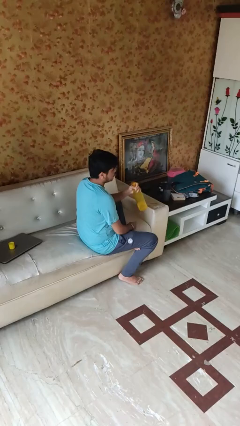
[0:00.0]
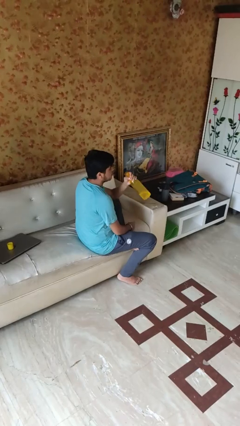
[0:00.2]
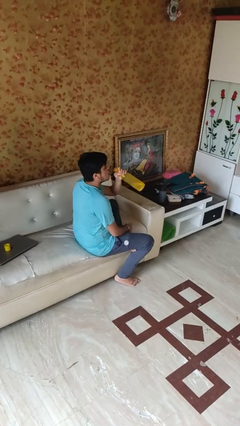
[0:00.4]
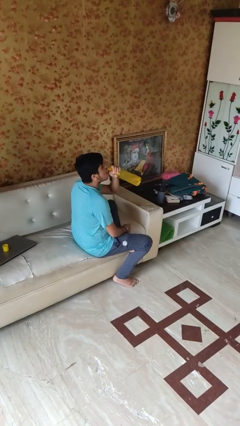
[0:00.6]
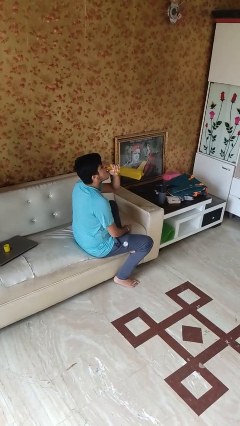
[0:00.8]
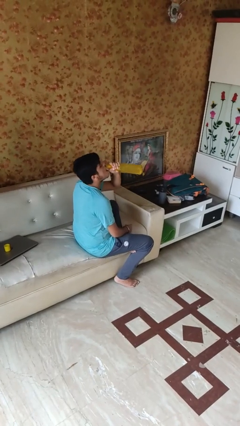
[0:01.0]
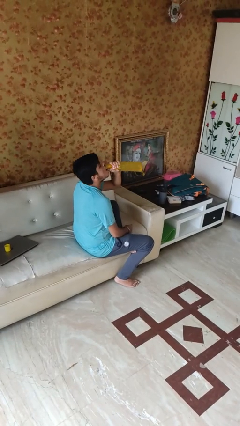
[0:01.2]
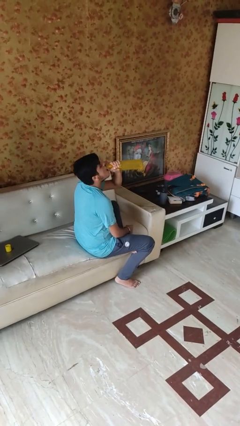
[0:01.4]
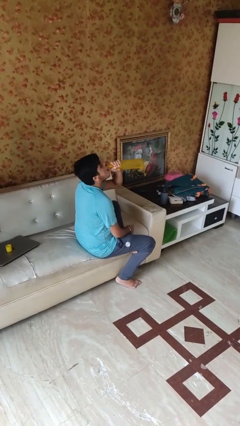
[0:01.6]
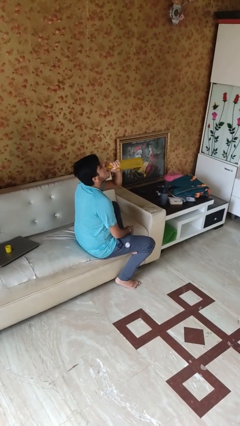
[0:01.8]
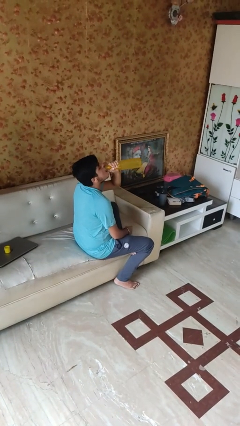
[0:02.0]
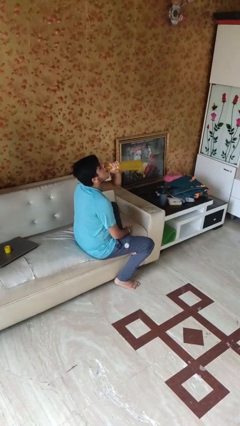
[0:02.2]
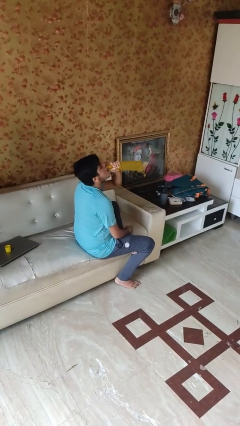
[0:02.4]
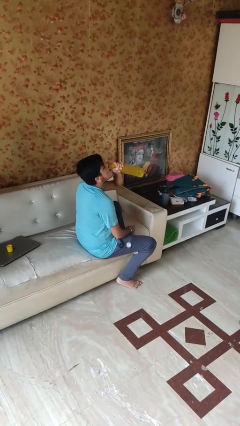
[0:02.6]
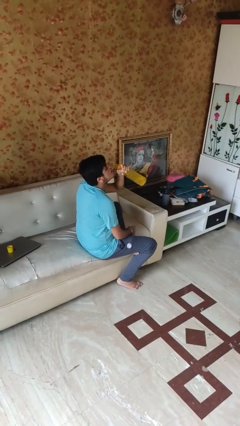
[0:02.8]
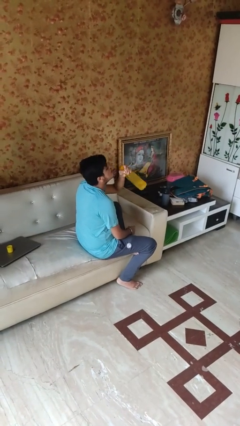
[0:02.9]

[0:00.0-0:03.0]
person drinks from bottle

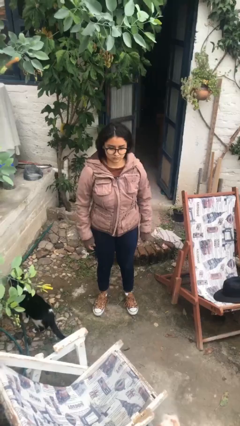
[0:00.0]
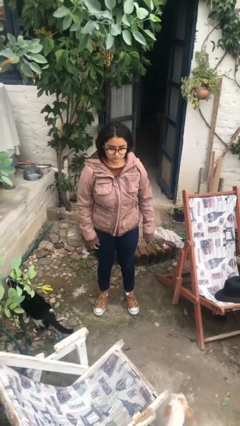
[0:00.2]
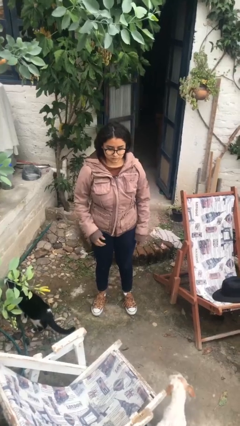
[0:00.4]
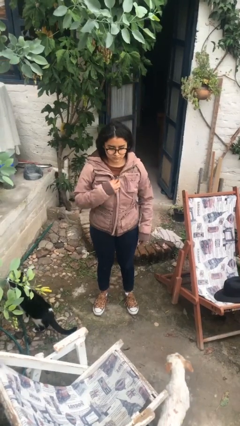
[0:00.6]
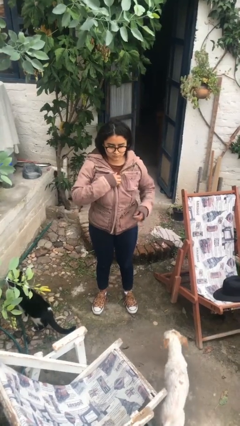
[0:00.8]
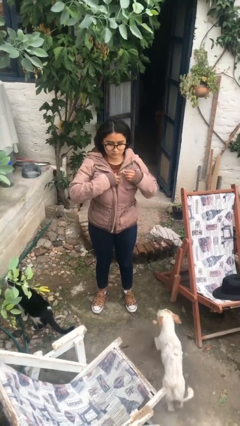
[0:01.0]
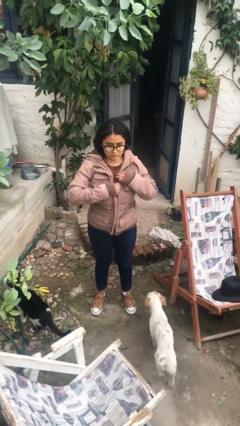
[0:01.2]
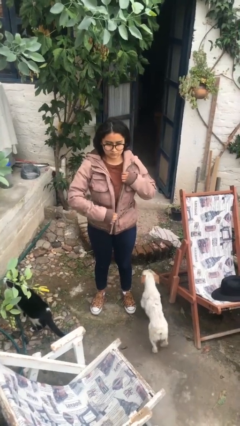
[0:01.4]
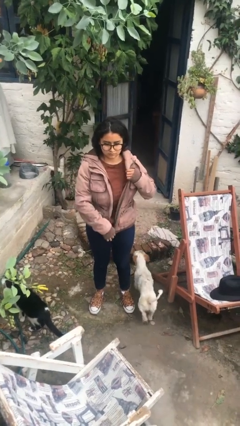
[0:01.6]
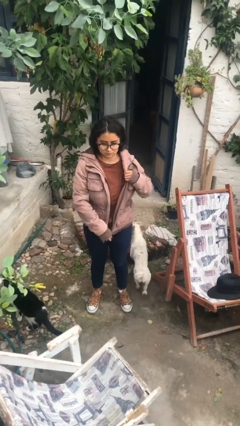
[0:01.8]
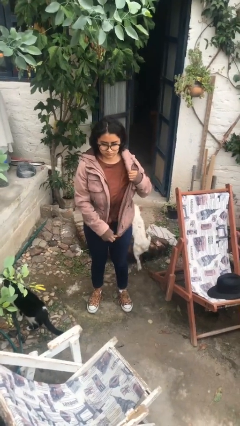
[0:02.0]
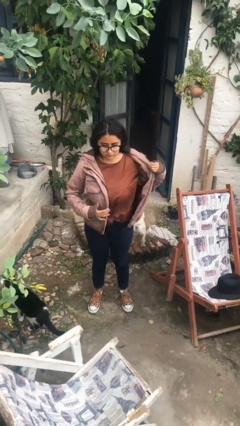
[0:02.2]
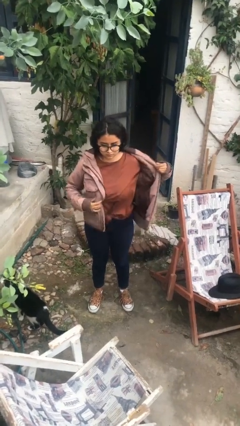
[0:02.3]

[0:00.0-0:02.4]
person unzips jacket

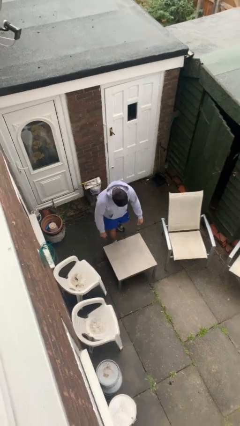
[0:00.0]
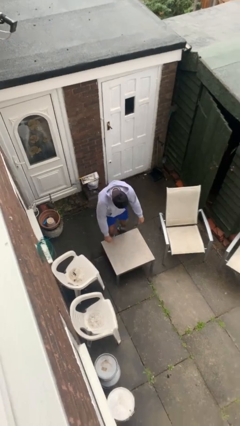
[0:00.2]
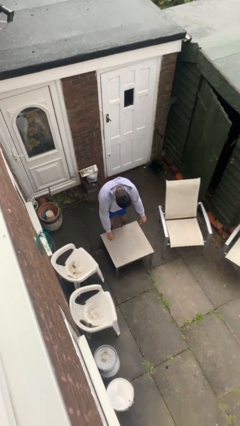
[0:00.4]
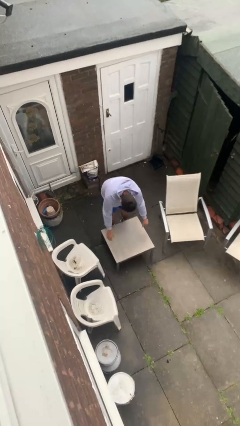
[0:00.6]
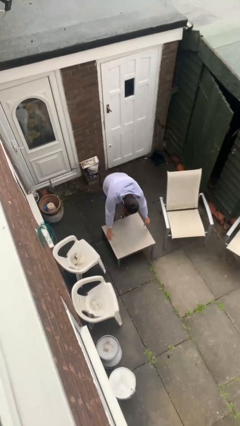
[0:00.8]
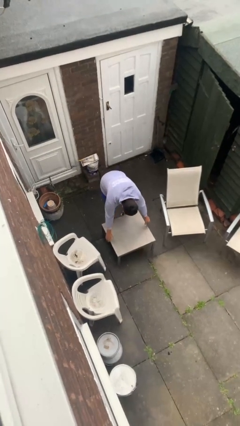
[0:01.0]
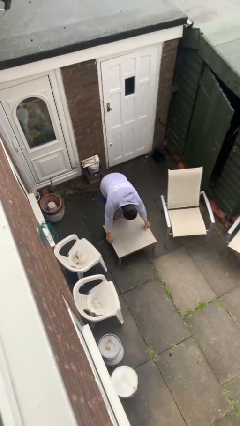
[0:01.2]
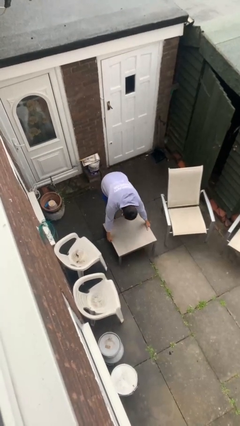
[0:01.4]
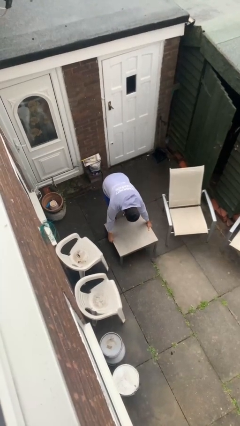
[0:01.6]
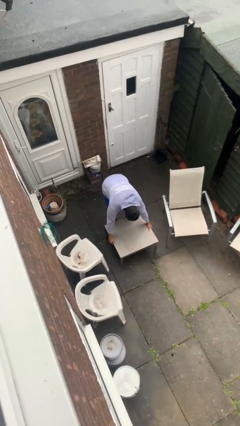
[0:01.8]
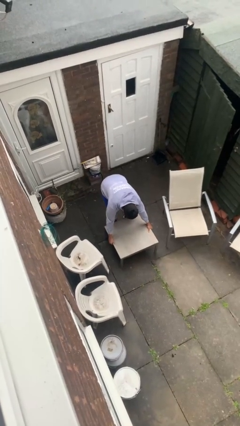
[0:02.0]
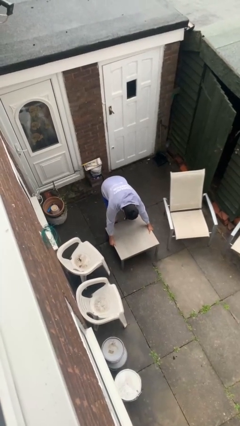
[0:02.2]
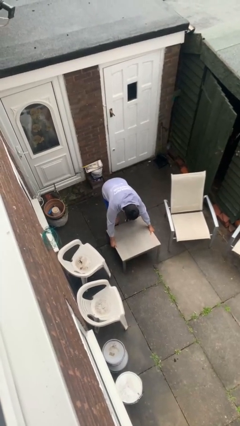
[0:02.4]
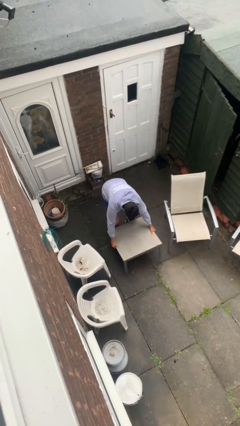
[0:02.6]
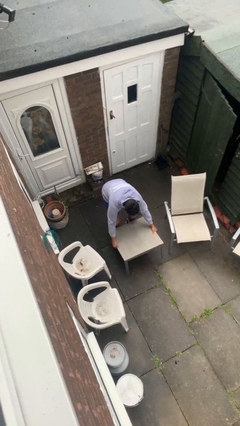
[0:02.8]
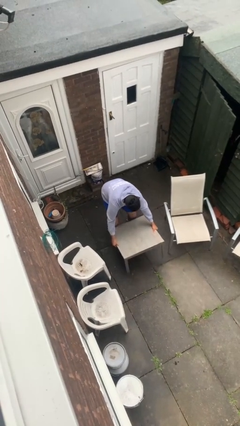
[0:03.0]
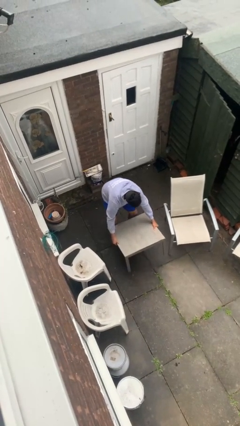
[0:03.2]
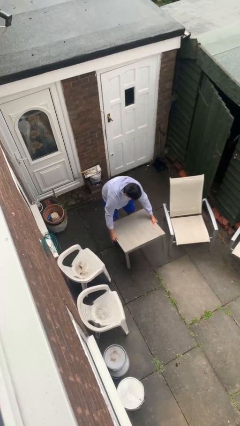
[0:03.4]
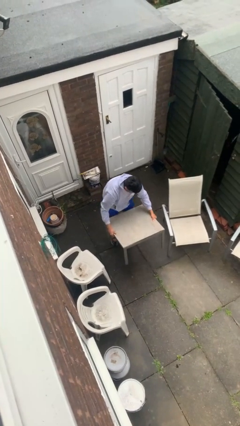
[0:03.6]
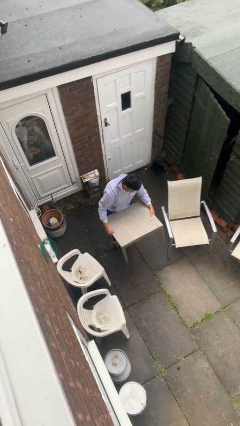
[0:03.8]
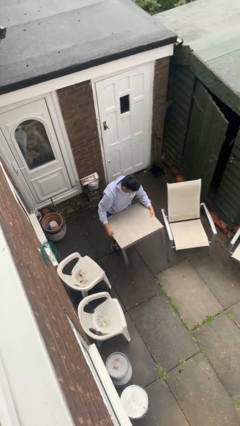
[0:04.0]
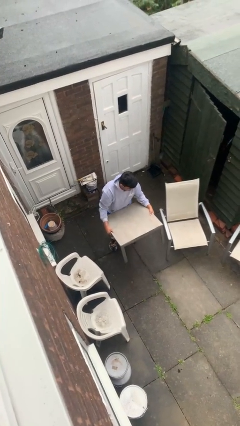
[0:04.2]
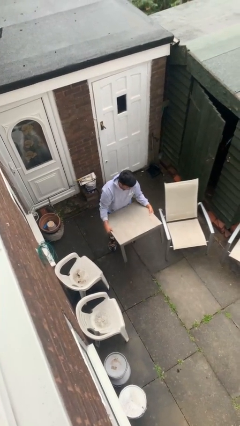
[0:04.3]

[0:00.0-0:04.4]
person picks up object from floor

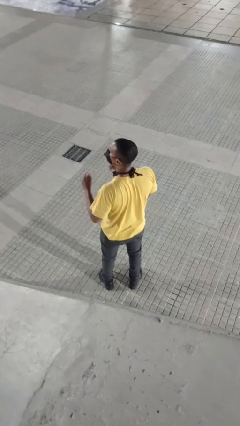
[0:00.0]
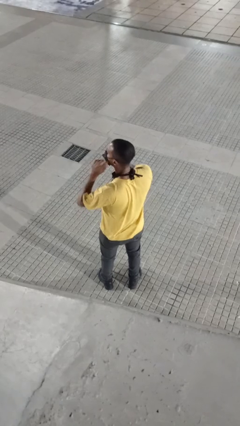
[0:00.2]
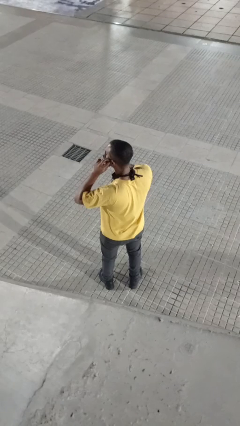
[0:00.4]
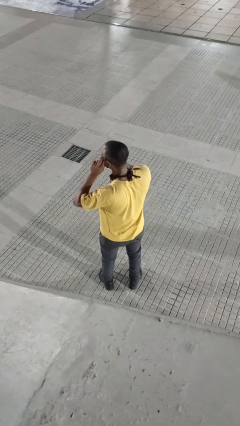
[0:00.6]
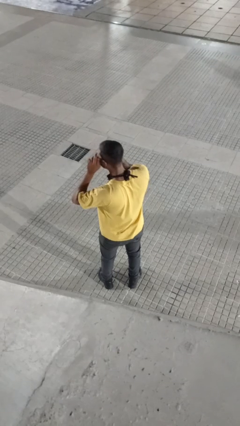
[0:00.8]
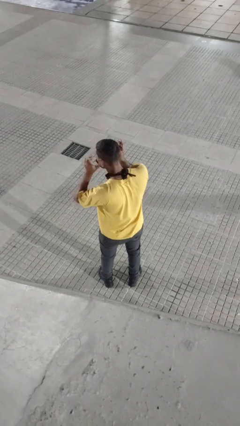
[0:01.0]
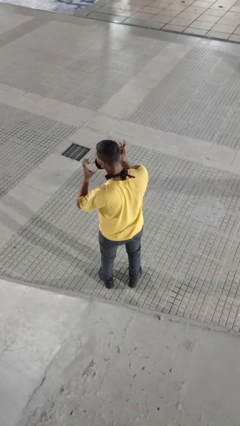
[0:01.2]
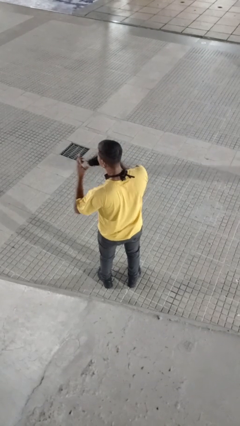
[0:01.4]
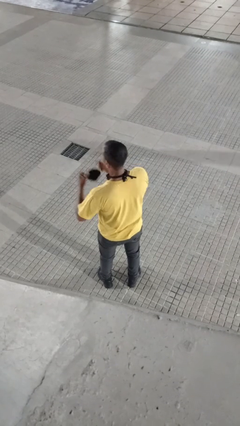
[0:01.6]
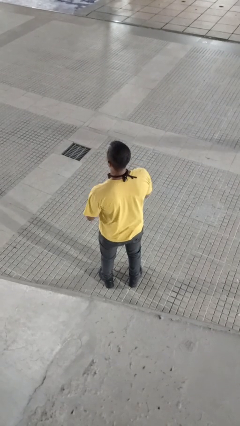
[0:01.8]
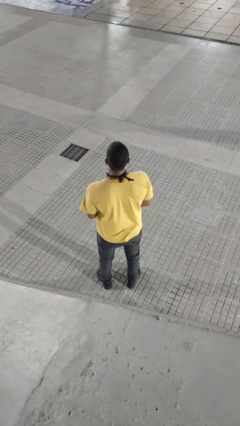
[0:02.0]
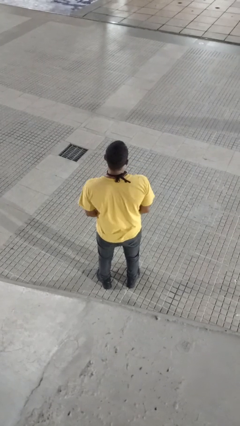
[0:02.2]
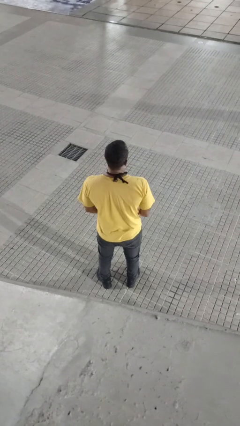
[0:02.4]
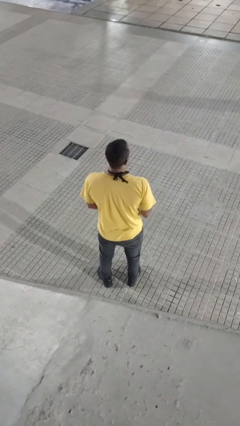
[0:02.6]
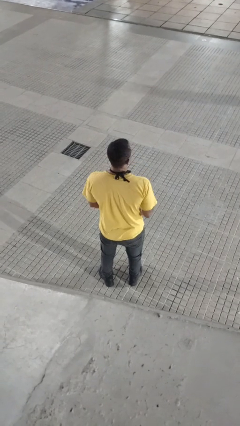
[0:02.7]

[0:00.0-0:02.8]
person takes off facemask

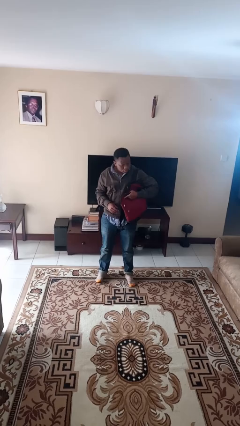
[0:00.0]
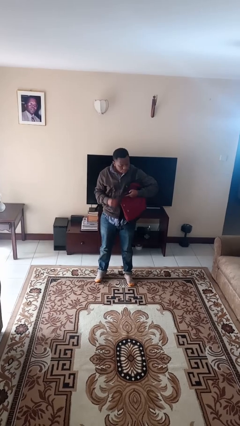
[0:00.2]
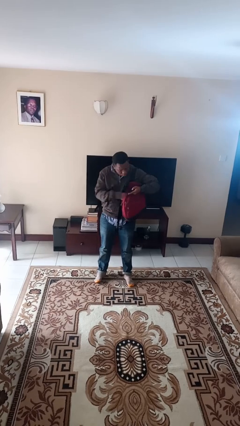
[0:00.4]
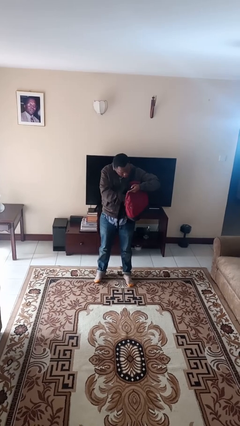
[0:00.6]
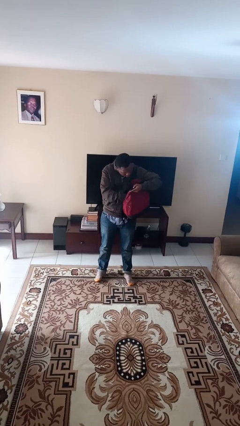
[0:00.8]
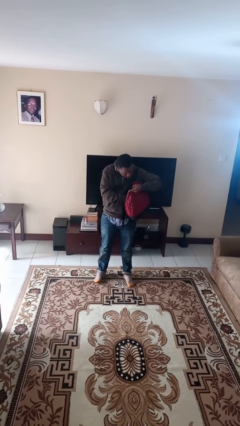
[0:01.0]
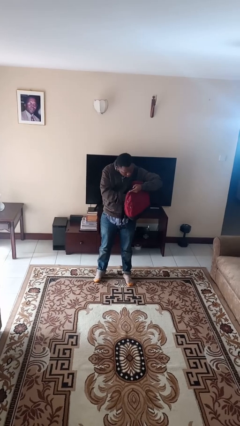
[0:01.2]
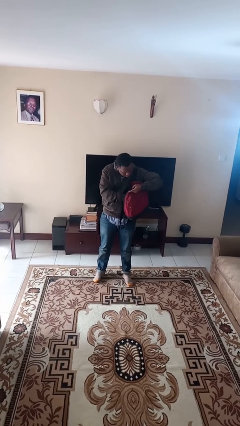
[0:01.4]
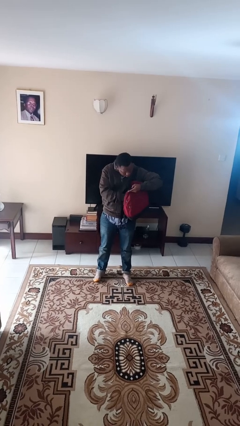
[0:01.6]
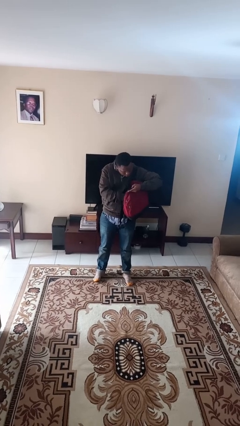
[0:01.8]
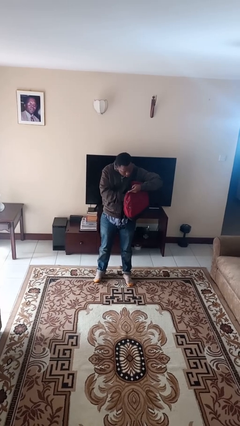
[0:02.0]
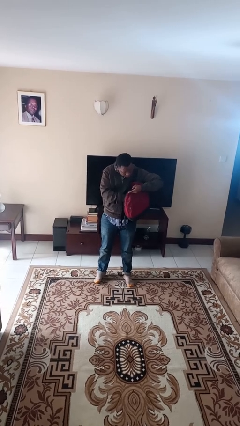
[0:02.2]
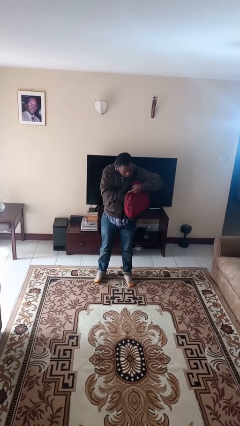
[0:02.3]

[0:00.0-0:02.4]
person searches in backpack

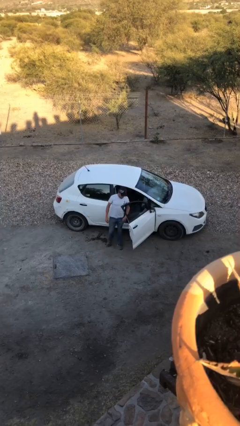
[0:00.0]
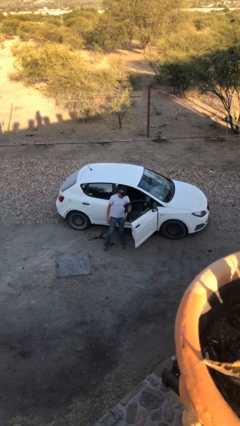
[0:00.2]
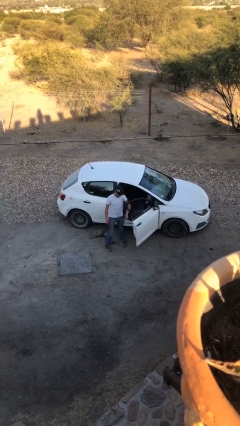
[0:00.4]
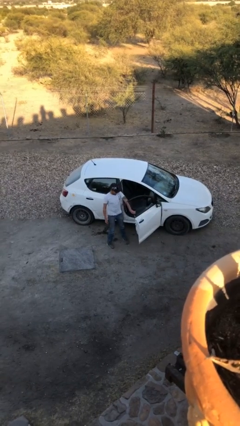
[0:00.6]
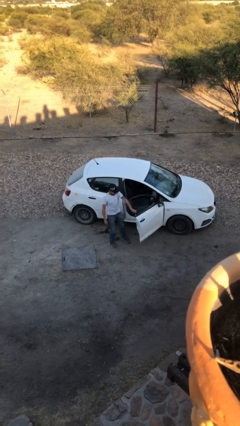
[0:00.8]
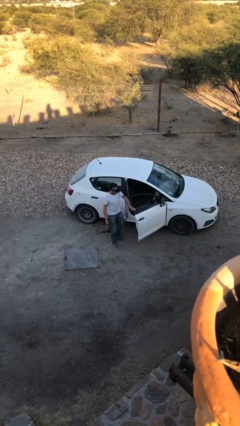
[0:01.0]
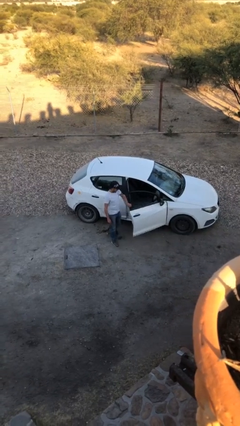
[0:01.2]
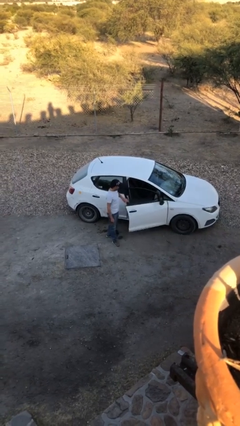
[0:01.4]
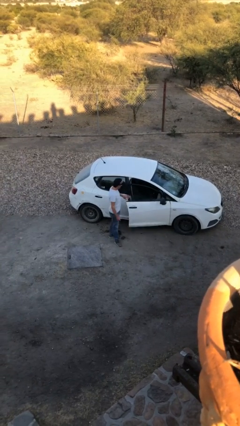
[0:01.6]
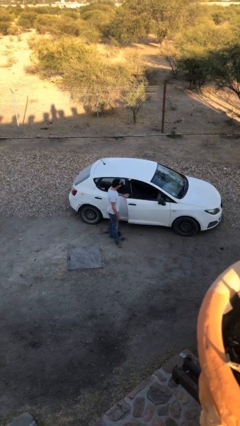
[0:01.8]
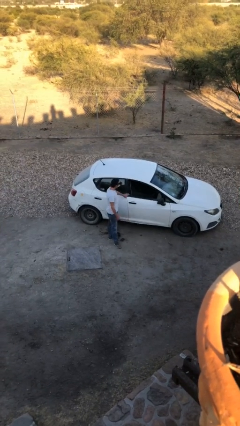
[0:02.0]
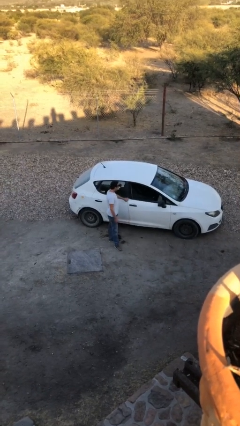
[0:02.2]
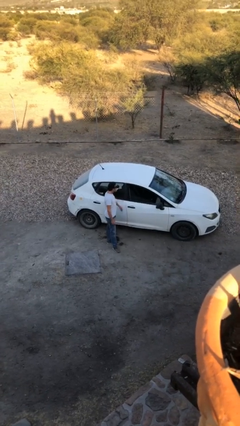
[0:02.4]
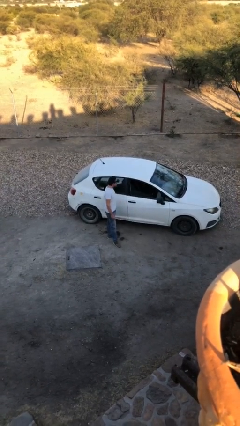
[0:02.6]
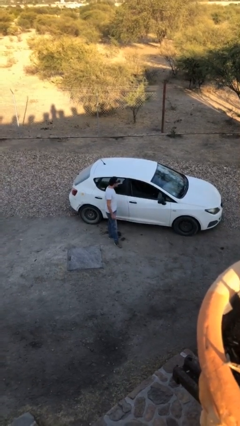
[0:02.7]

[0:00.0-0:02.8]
person closes car door
